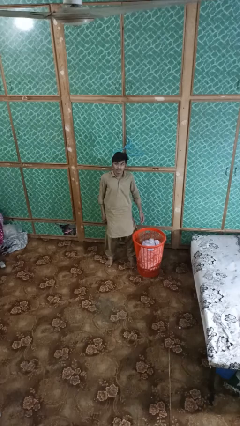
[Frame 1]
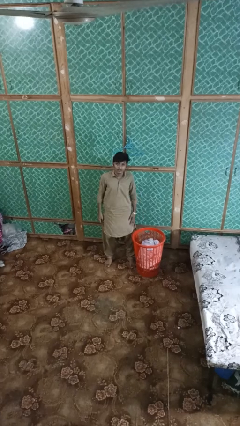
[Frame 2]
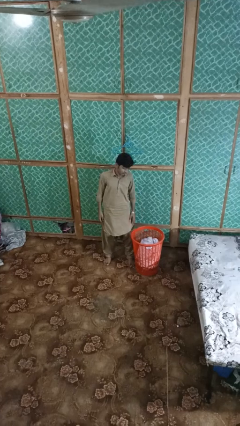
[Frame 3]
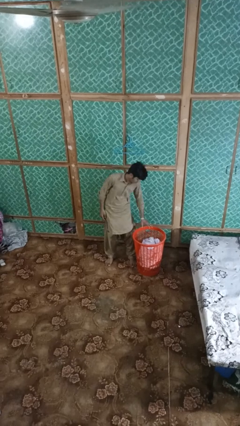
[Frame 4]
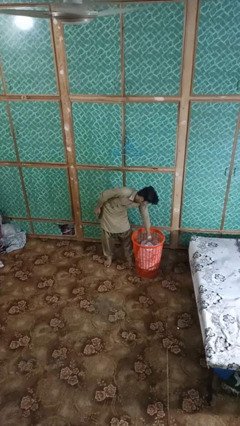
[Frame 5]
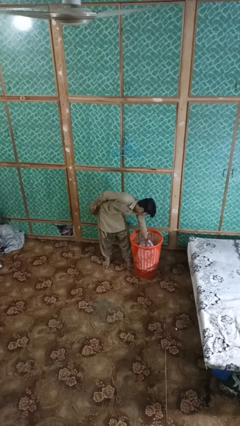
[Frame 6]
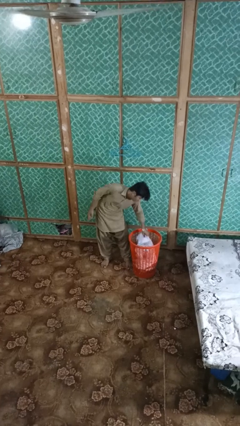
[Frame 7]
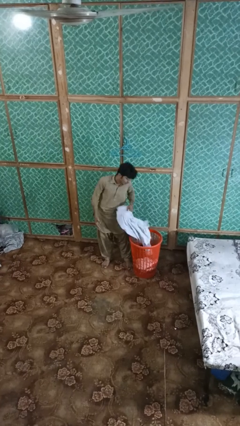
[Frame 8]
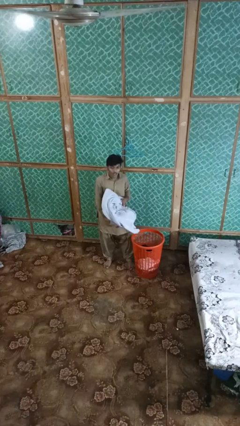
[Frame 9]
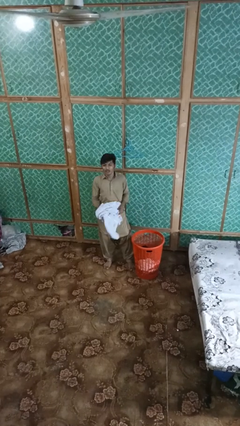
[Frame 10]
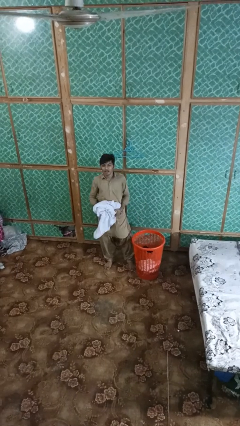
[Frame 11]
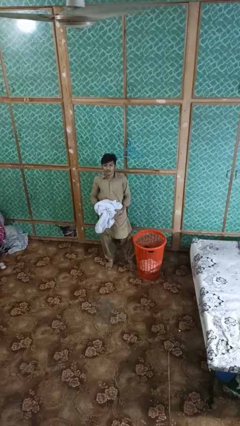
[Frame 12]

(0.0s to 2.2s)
person takes object from basket

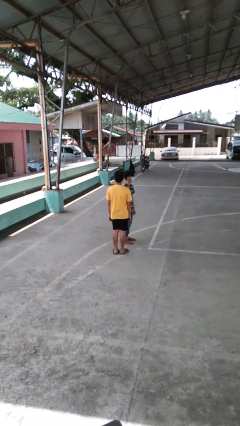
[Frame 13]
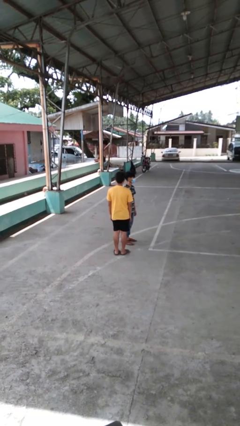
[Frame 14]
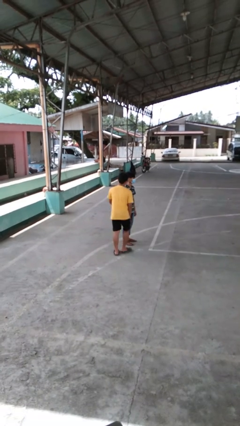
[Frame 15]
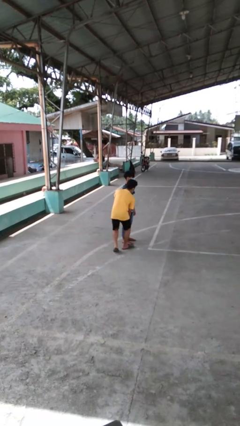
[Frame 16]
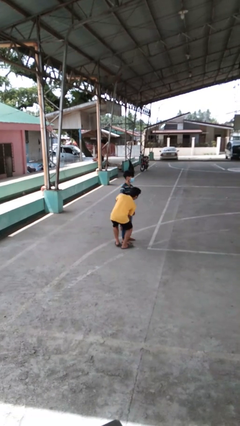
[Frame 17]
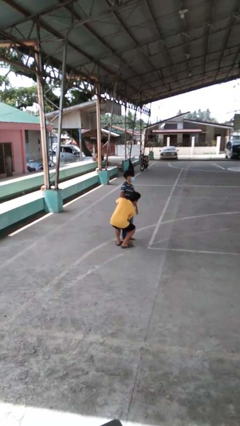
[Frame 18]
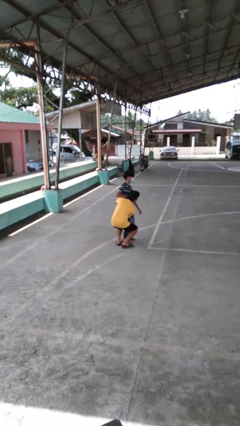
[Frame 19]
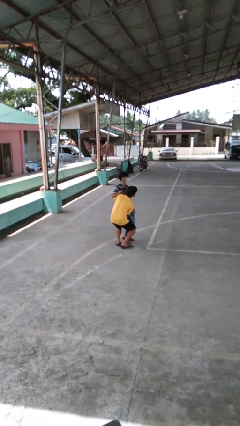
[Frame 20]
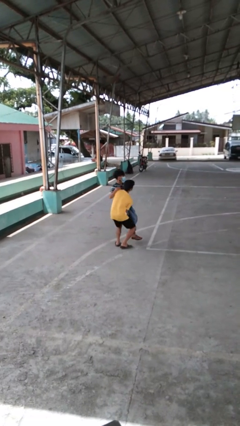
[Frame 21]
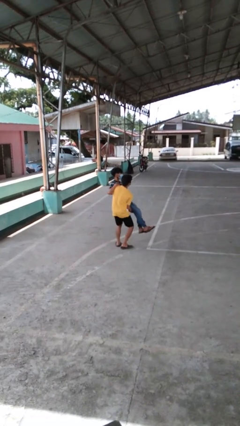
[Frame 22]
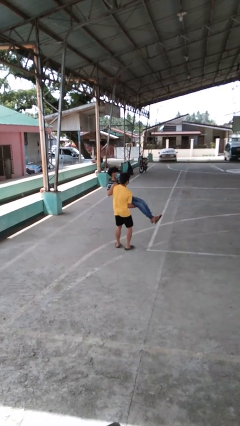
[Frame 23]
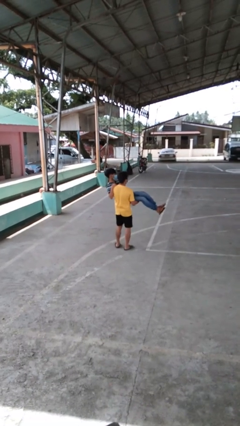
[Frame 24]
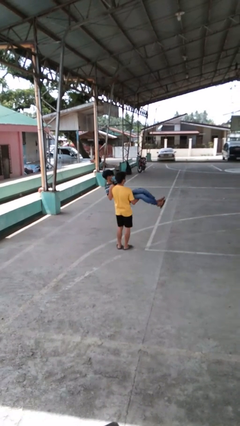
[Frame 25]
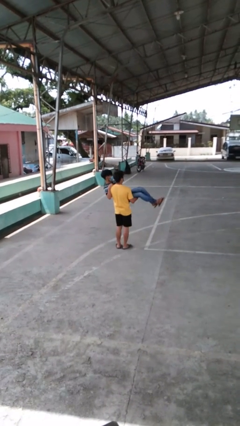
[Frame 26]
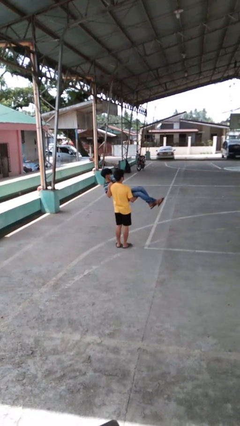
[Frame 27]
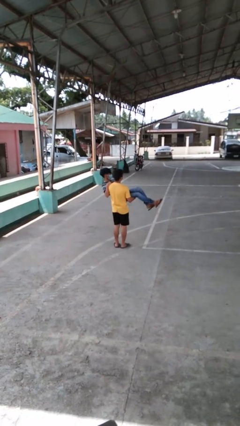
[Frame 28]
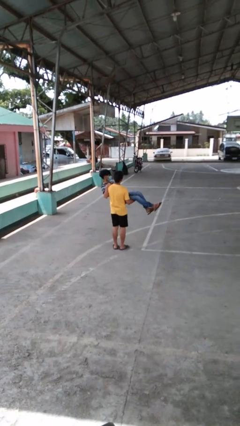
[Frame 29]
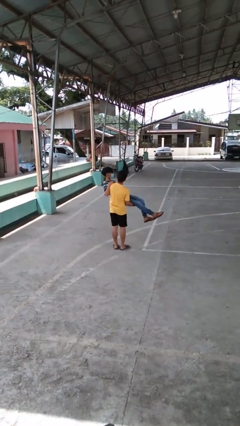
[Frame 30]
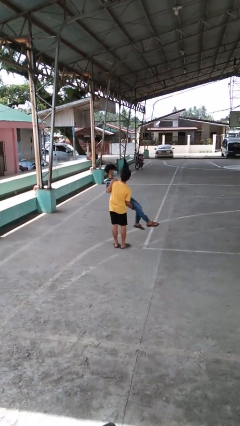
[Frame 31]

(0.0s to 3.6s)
person picks up person

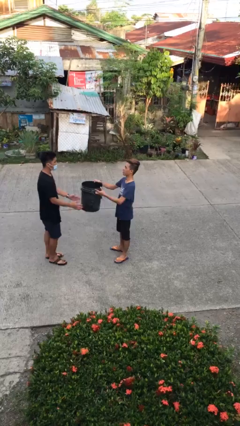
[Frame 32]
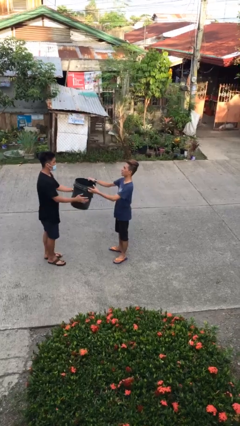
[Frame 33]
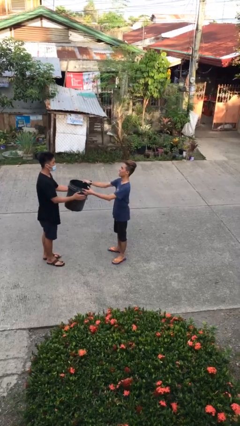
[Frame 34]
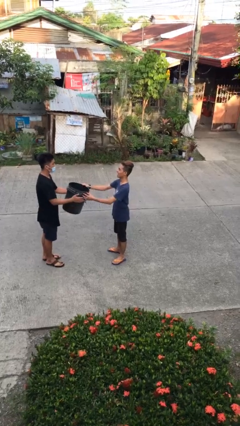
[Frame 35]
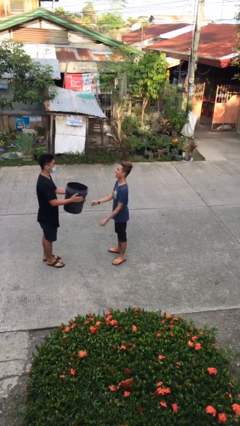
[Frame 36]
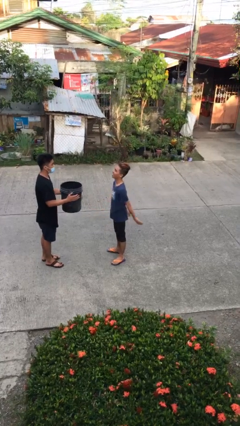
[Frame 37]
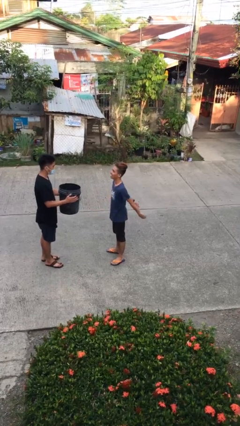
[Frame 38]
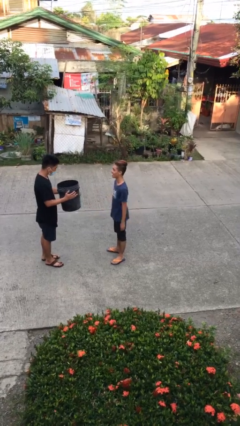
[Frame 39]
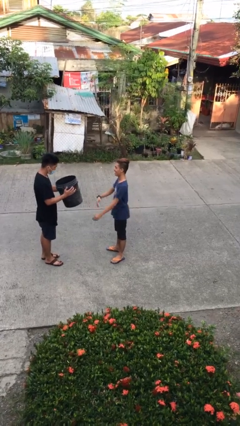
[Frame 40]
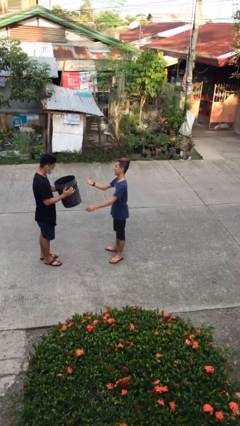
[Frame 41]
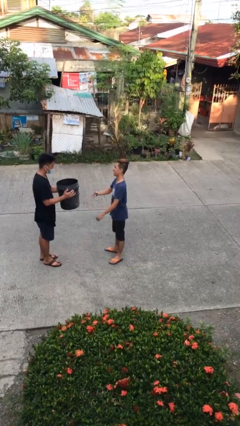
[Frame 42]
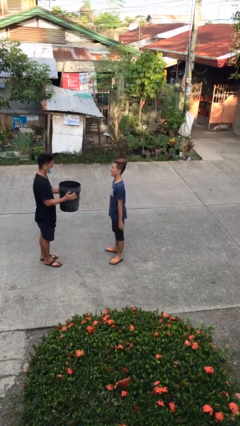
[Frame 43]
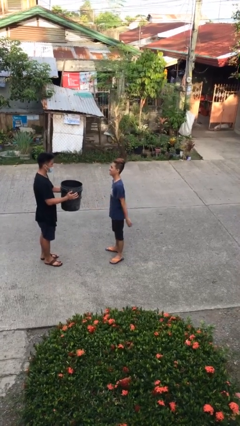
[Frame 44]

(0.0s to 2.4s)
person transfers object to person

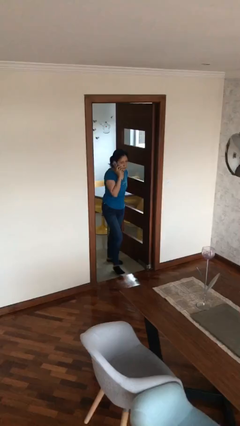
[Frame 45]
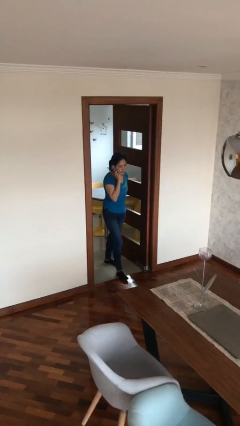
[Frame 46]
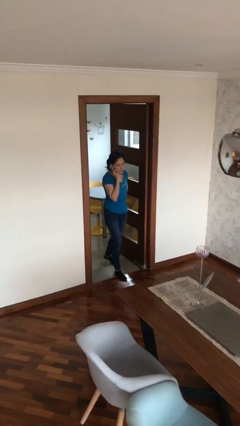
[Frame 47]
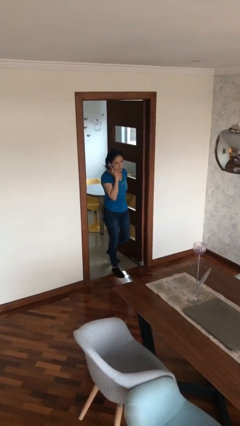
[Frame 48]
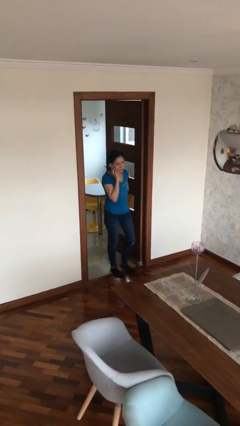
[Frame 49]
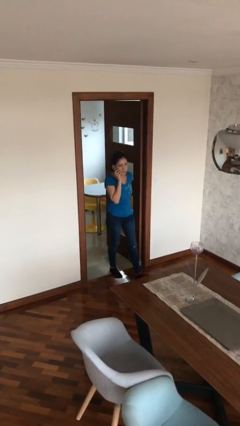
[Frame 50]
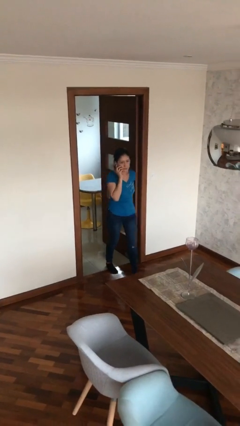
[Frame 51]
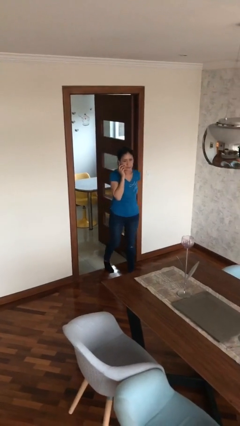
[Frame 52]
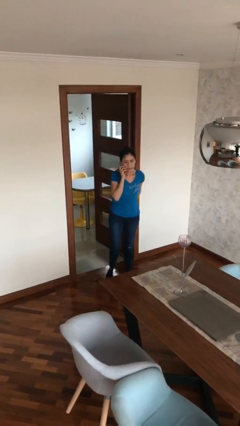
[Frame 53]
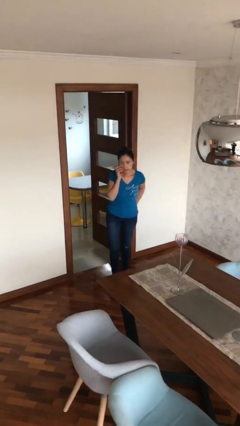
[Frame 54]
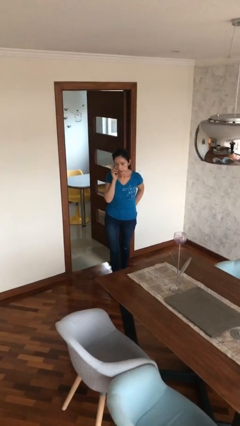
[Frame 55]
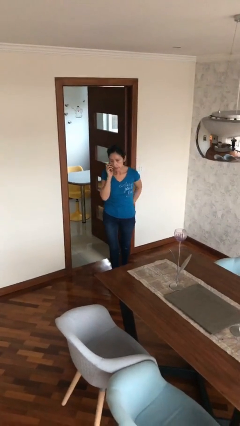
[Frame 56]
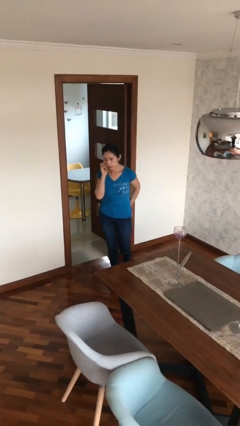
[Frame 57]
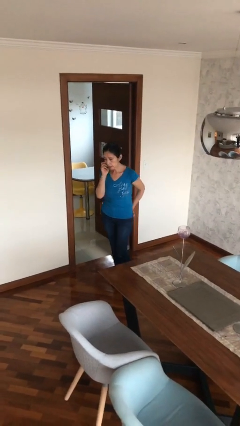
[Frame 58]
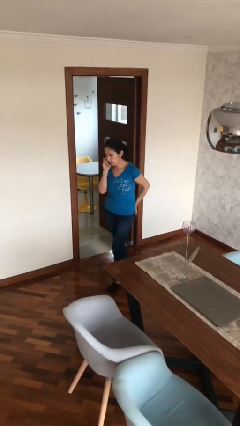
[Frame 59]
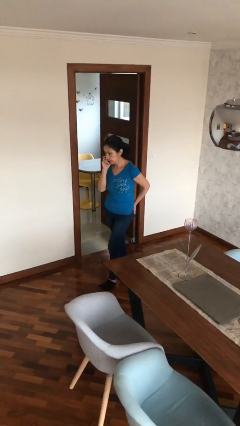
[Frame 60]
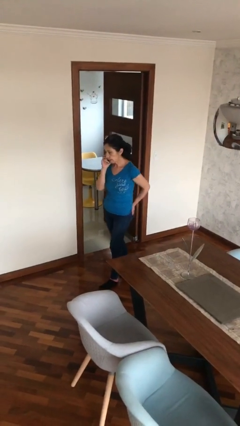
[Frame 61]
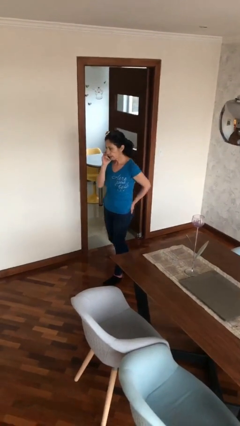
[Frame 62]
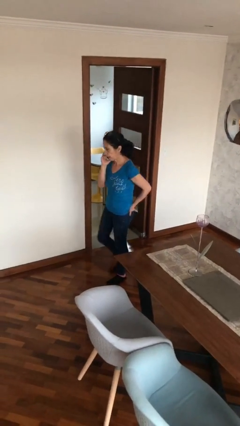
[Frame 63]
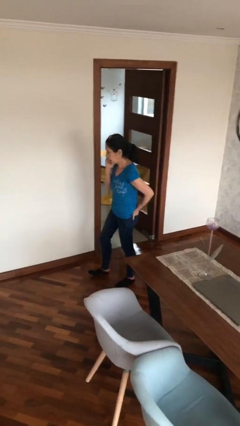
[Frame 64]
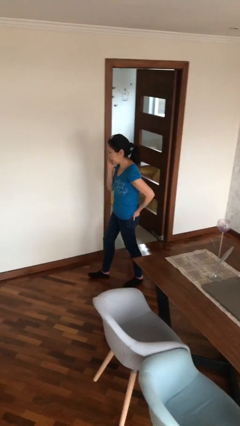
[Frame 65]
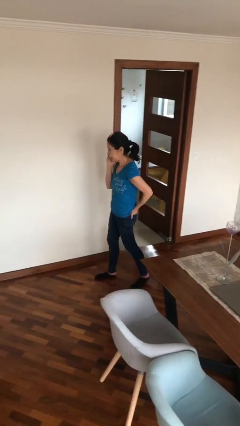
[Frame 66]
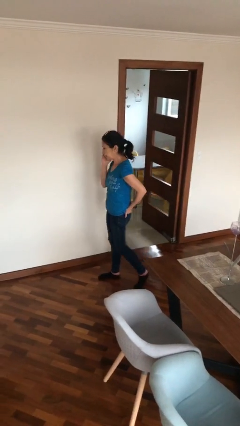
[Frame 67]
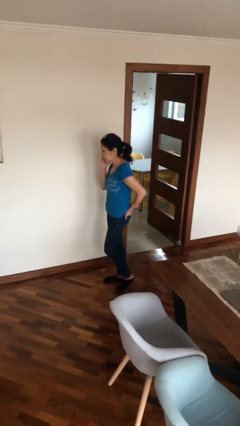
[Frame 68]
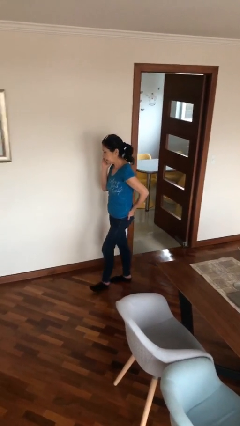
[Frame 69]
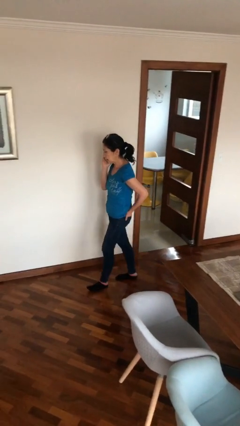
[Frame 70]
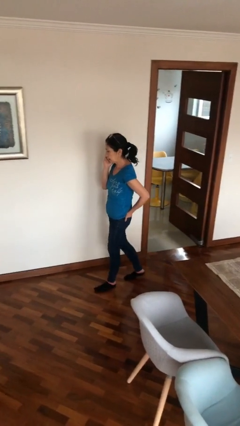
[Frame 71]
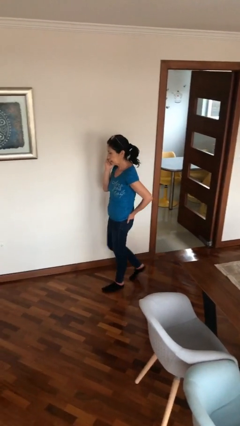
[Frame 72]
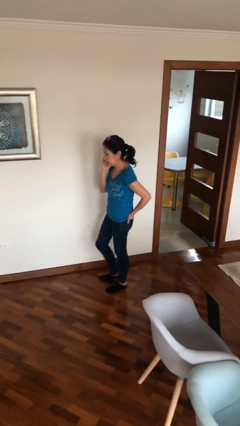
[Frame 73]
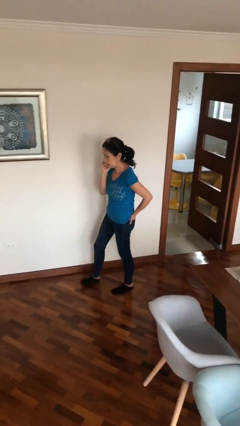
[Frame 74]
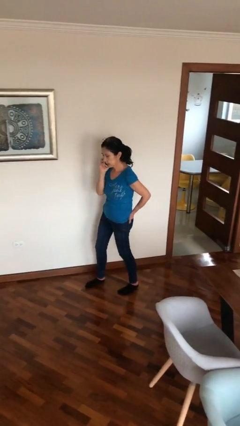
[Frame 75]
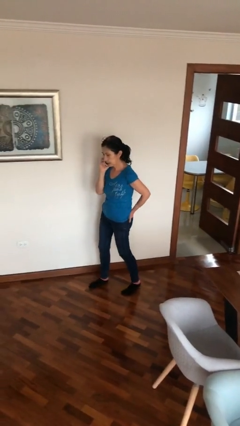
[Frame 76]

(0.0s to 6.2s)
person enters scene through structure

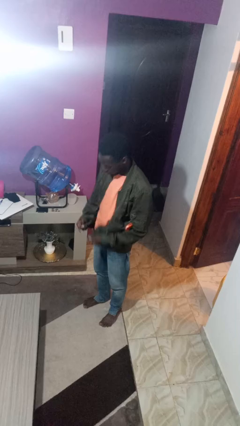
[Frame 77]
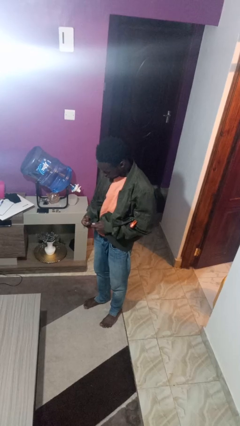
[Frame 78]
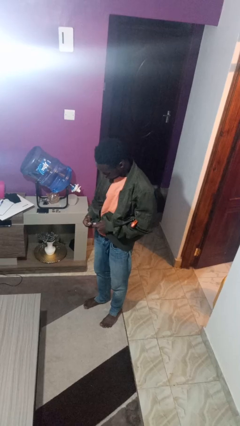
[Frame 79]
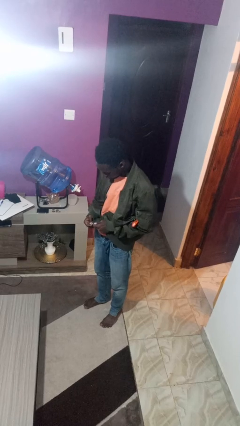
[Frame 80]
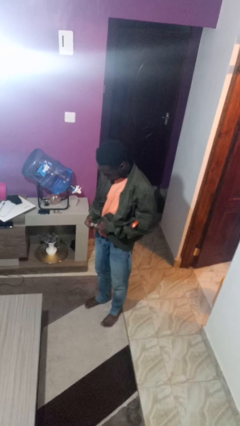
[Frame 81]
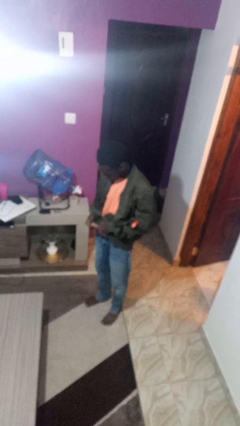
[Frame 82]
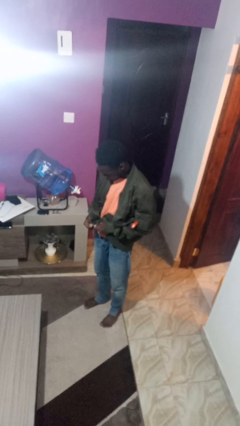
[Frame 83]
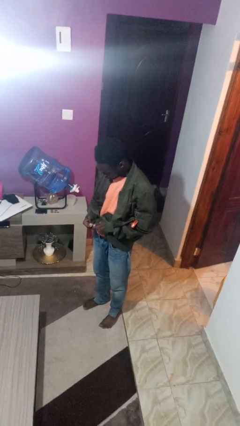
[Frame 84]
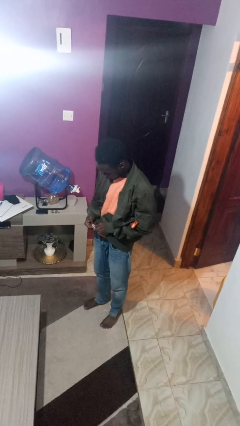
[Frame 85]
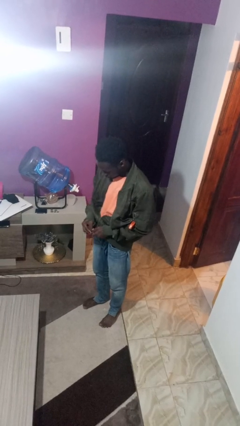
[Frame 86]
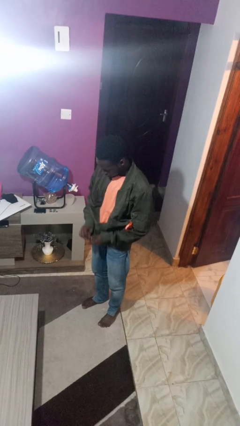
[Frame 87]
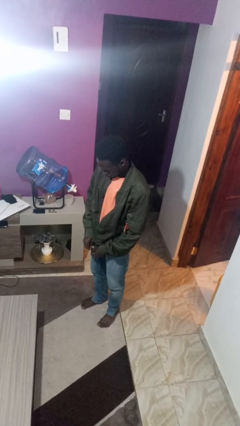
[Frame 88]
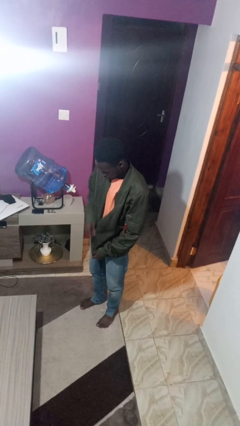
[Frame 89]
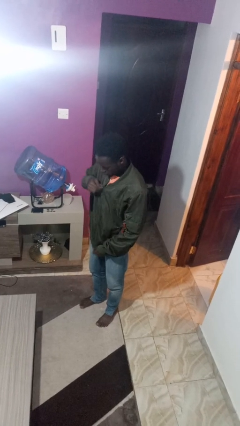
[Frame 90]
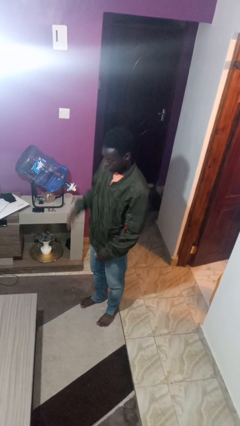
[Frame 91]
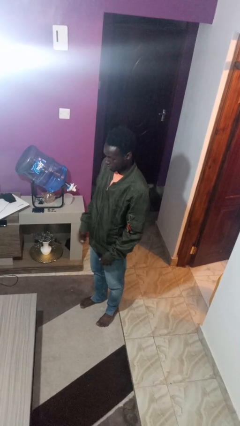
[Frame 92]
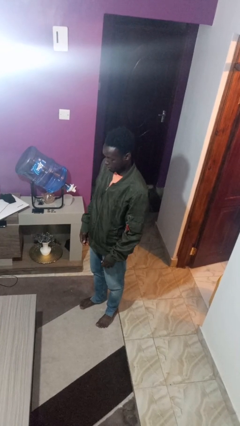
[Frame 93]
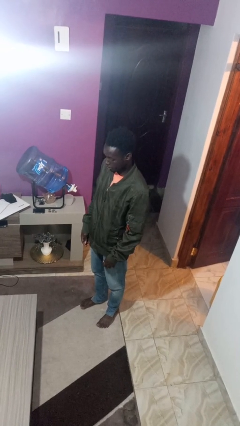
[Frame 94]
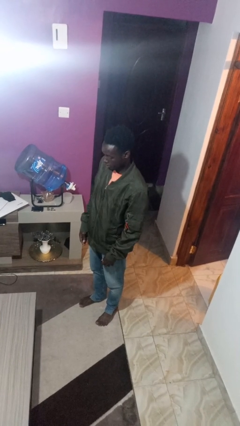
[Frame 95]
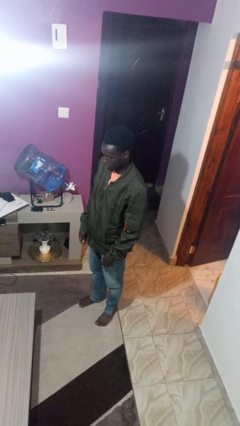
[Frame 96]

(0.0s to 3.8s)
person zips up jacket
